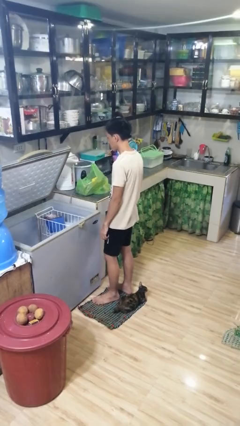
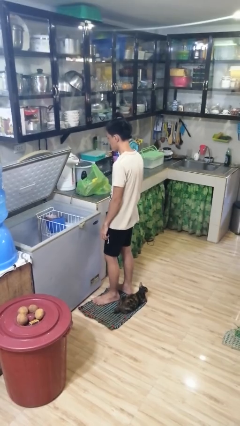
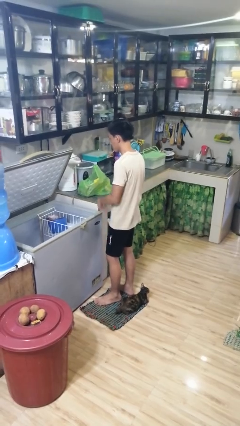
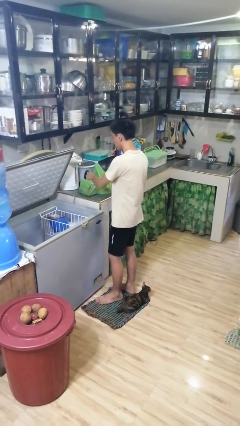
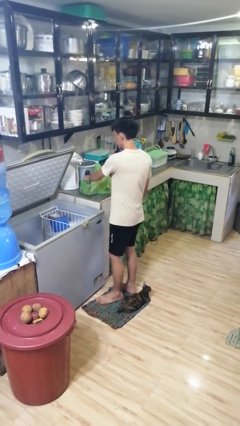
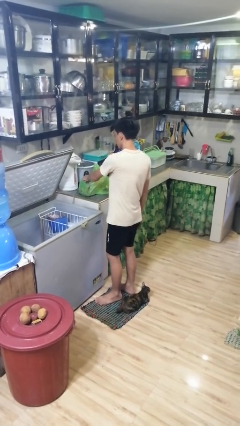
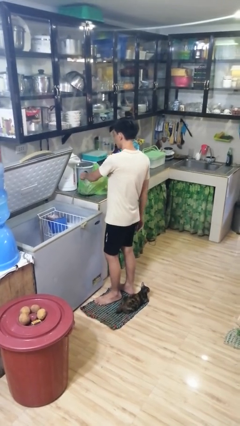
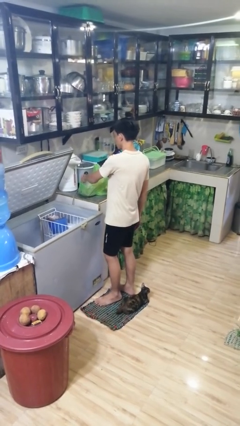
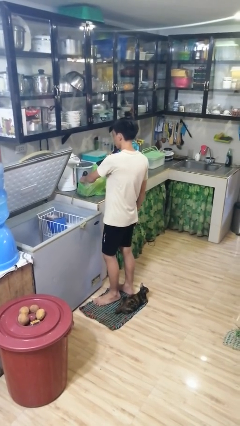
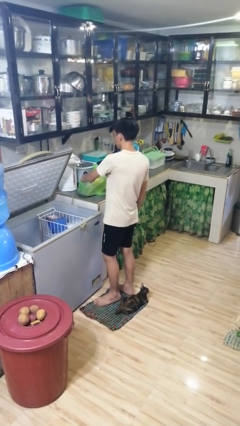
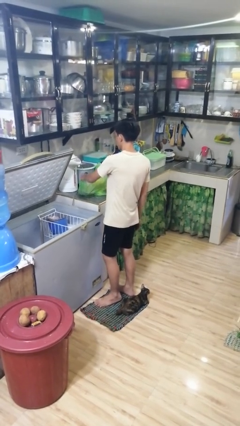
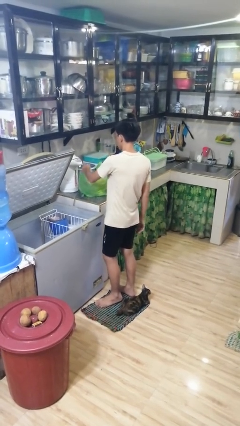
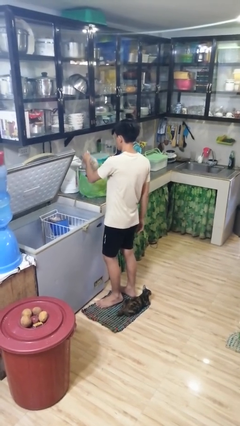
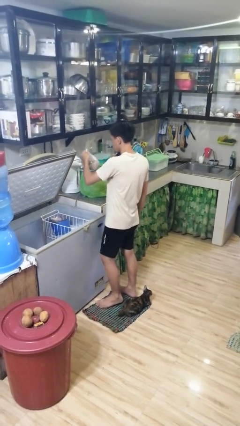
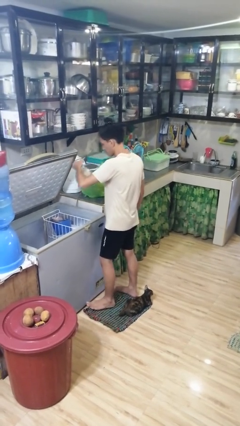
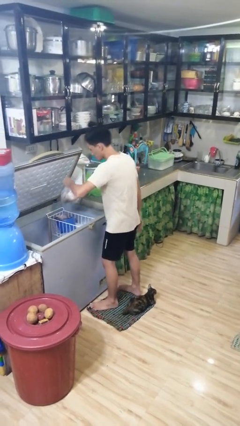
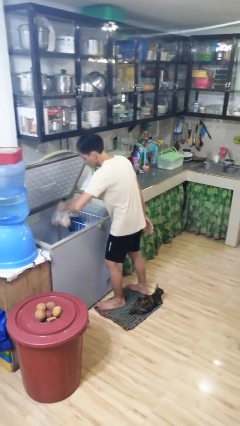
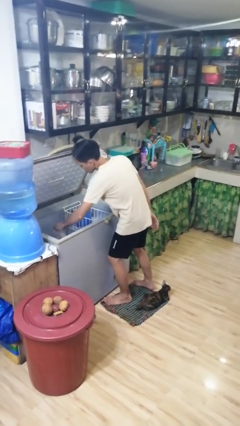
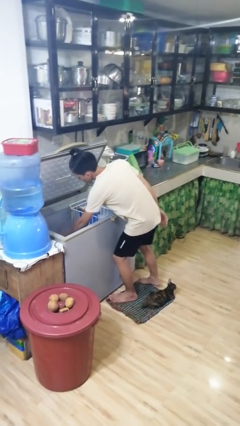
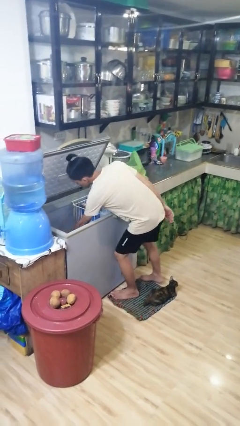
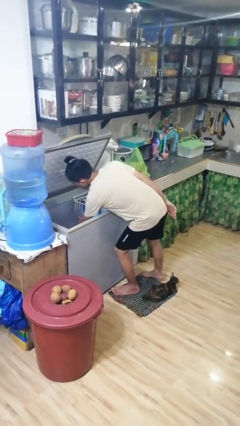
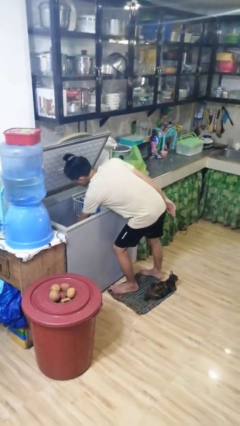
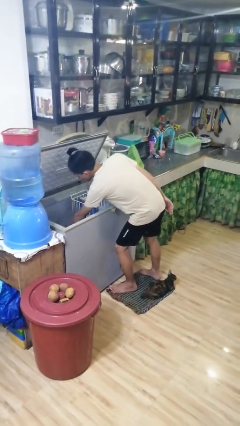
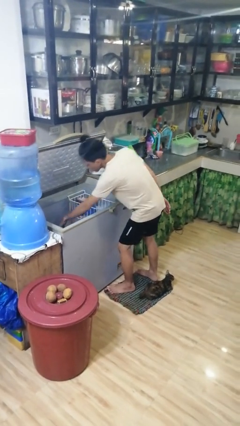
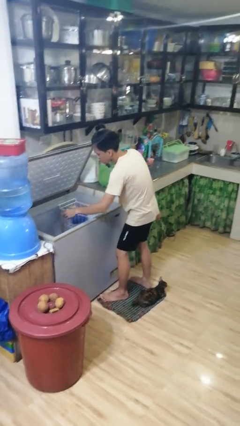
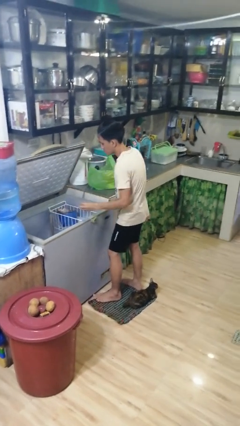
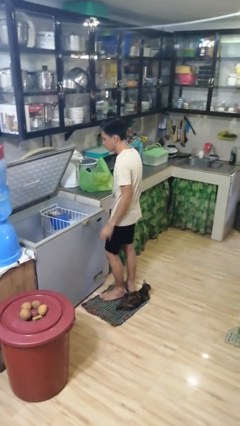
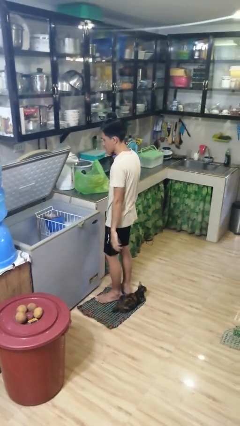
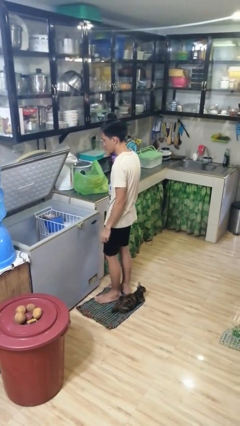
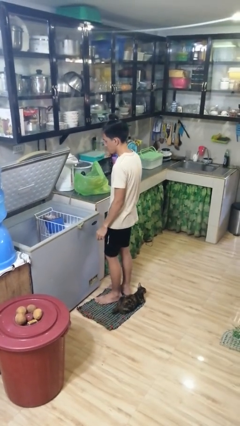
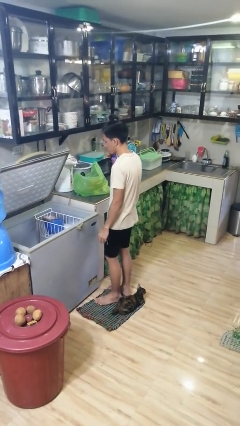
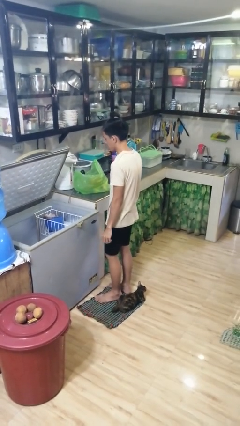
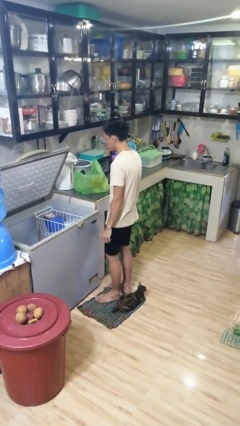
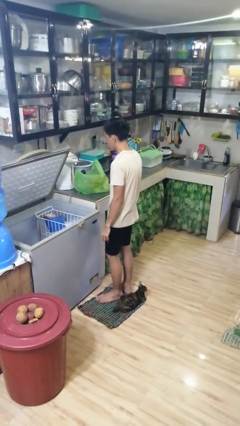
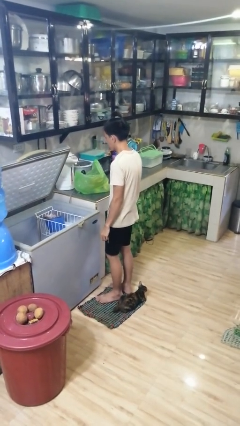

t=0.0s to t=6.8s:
person loads groceries into refrigerator

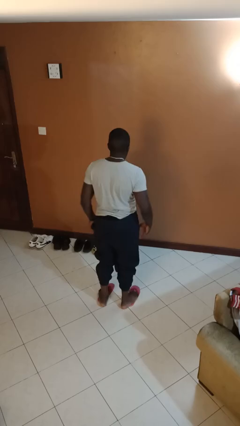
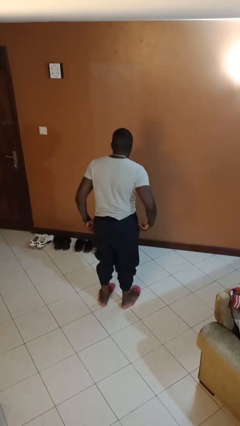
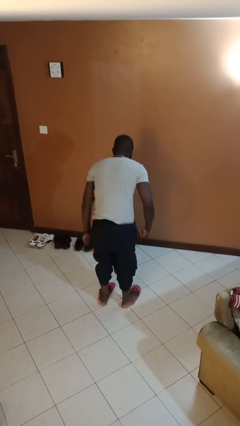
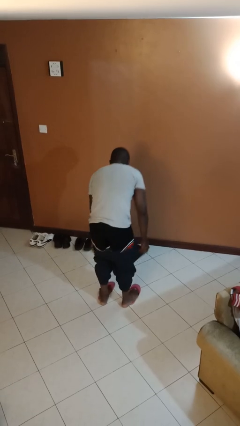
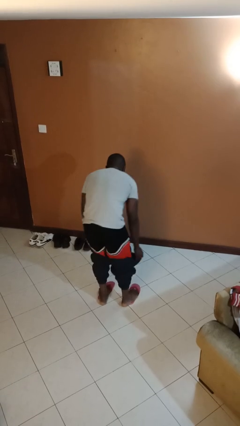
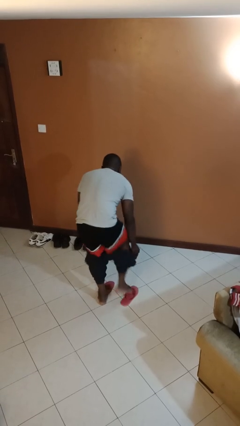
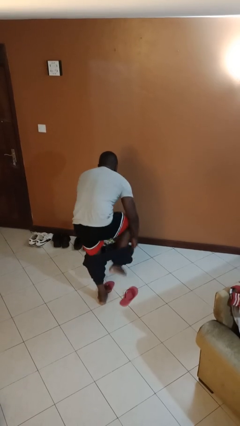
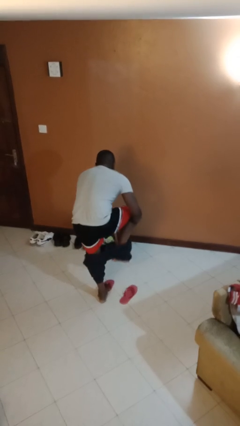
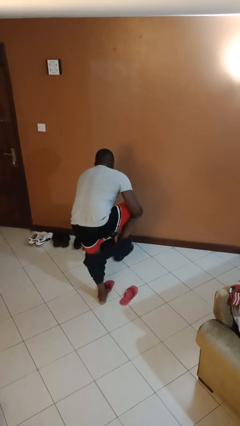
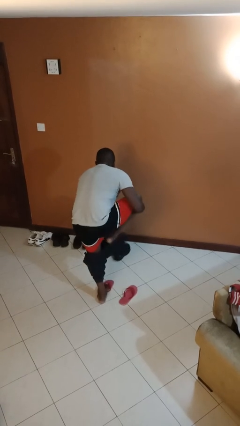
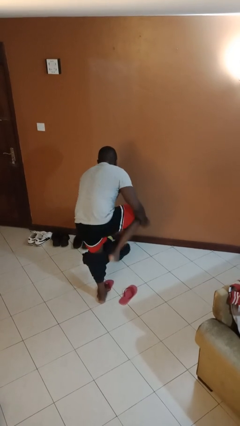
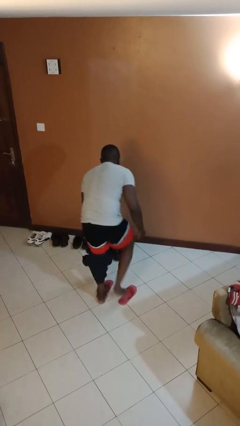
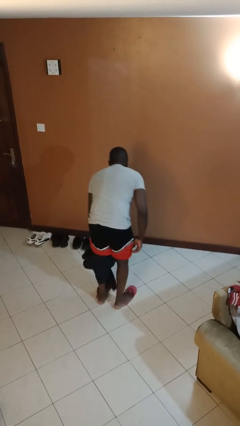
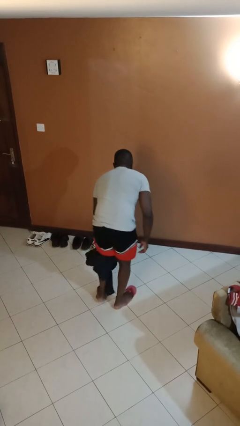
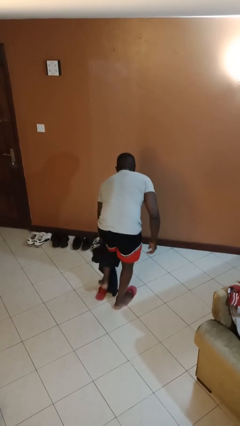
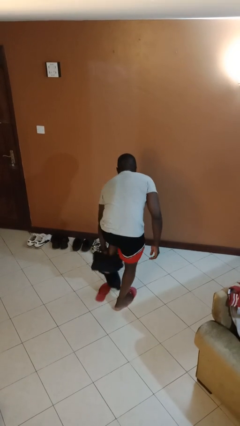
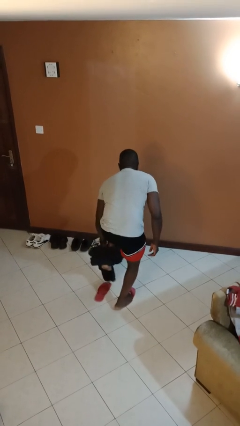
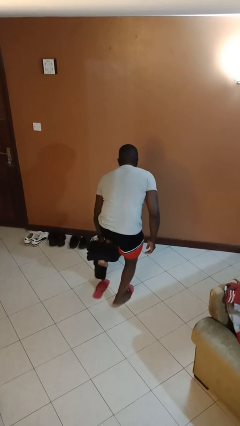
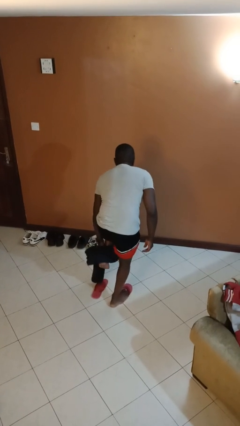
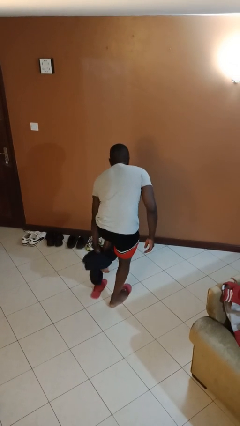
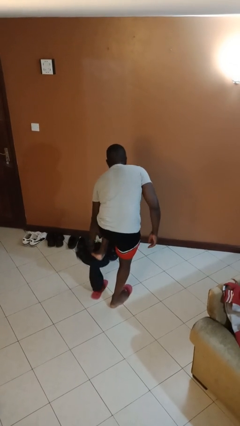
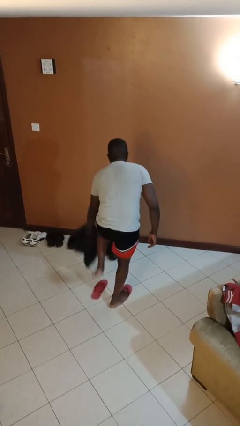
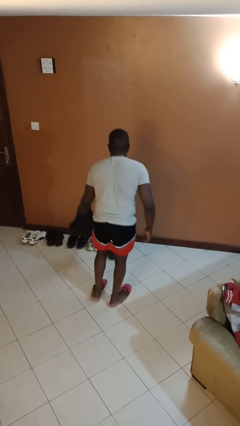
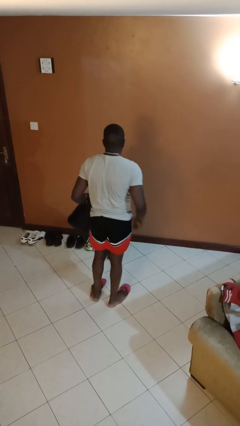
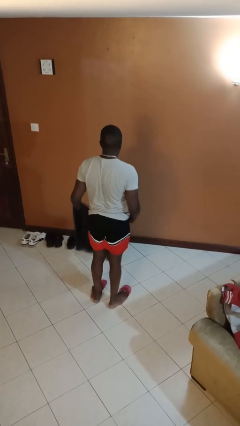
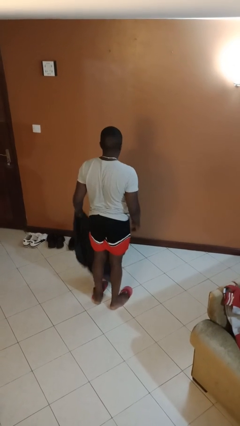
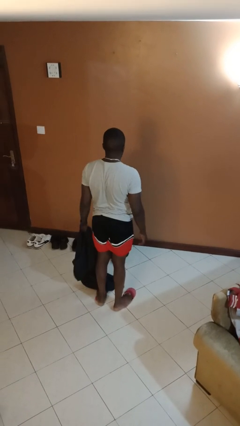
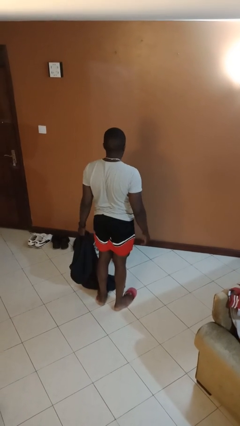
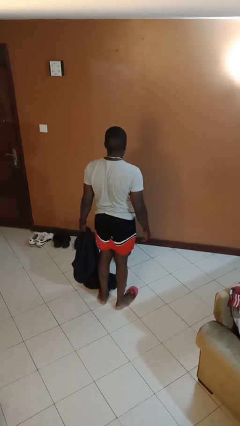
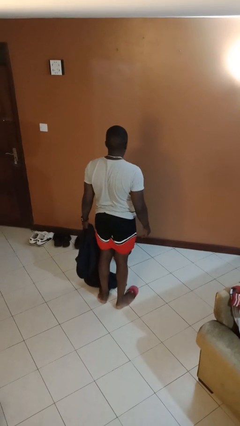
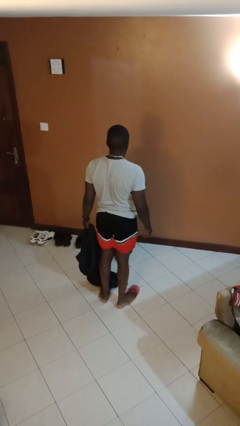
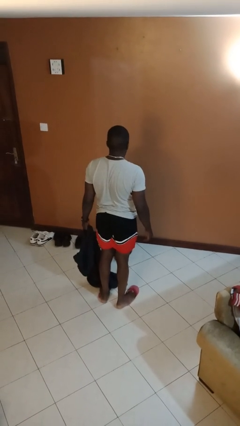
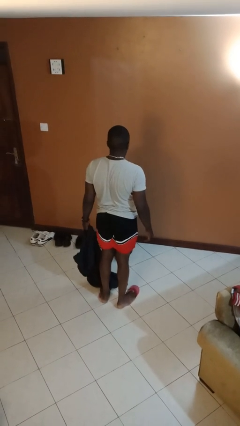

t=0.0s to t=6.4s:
person takes off pants

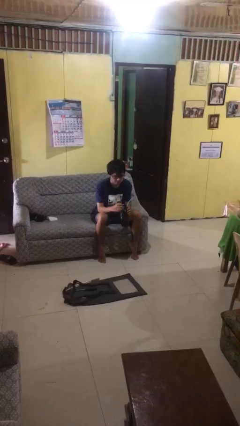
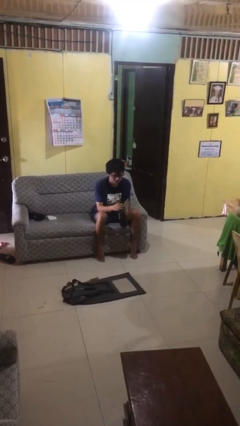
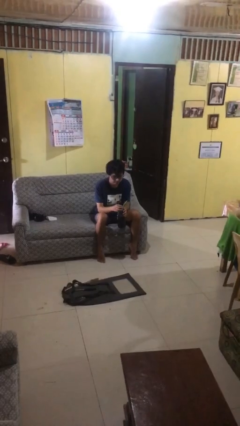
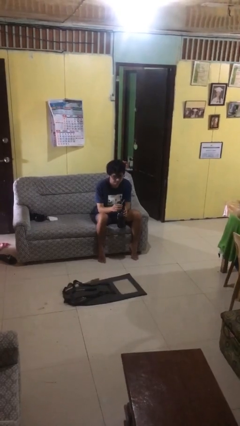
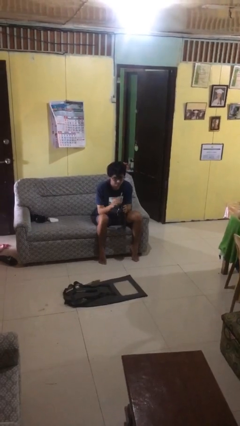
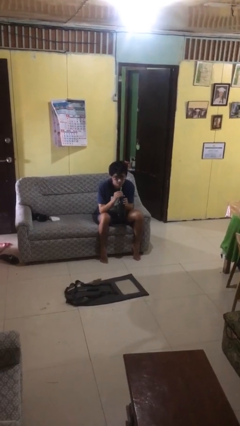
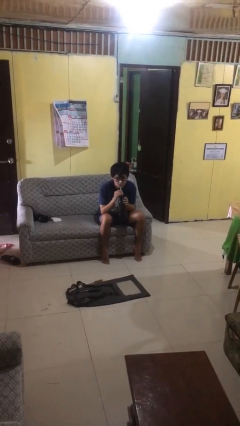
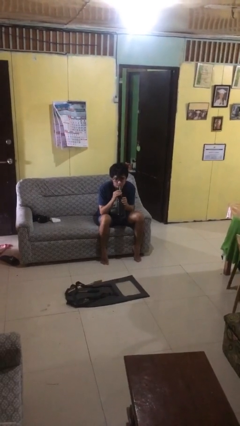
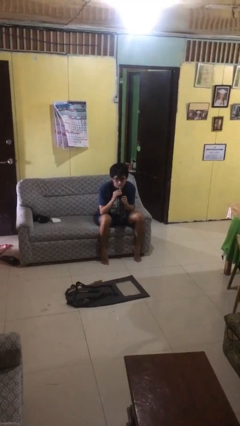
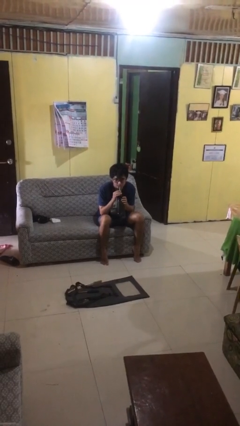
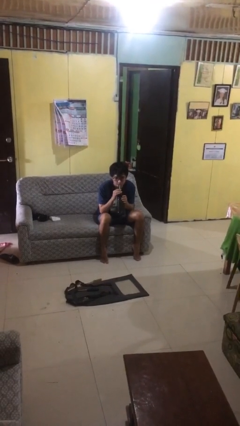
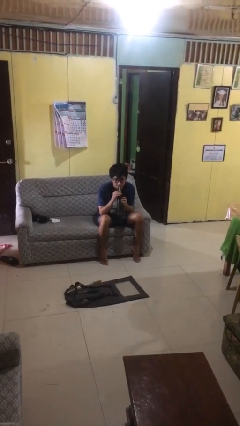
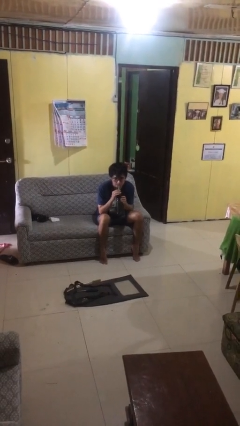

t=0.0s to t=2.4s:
person drinks from straw

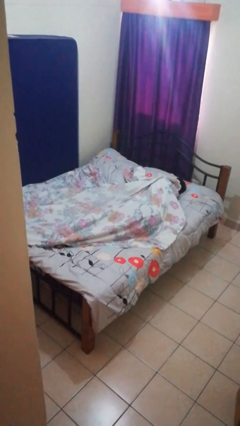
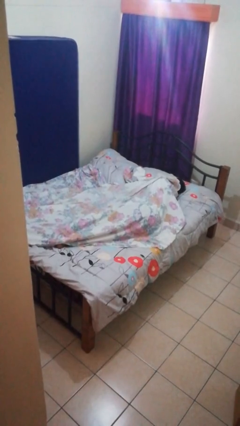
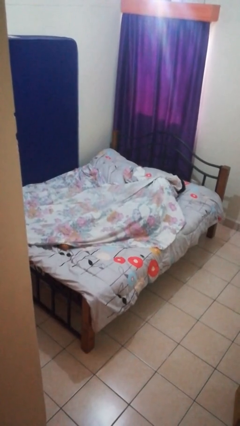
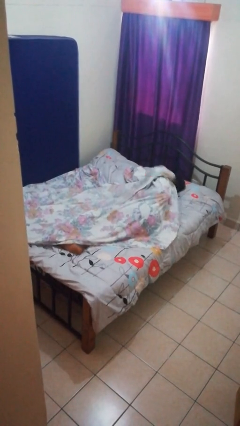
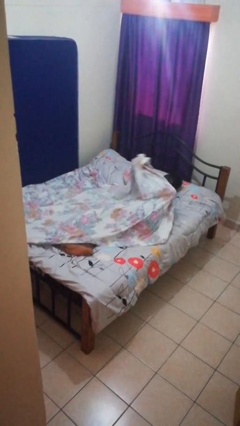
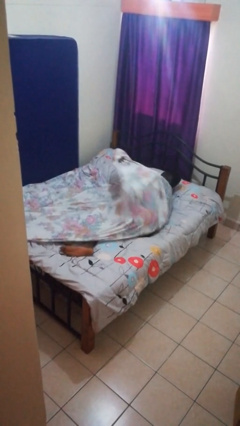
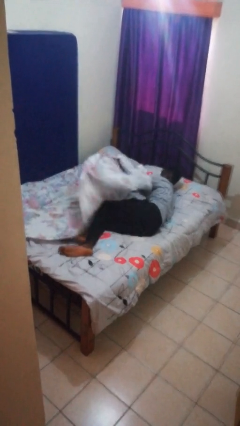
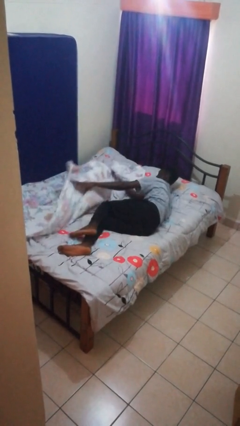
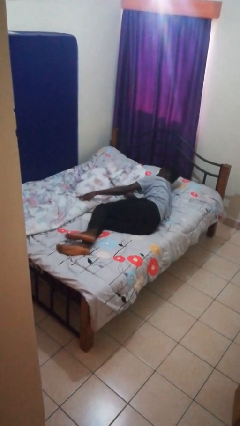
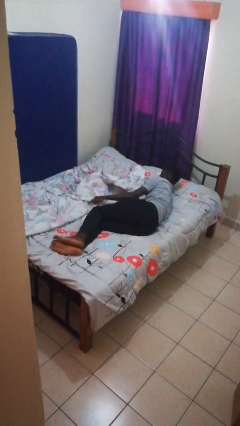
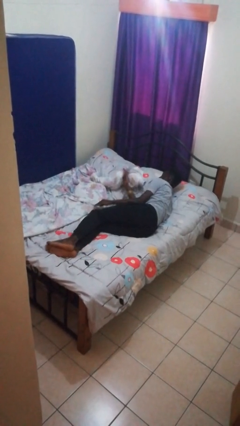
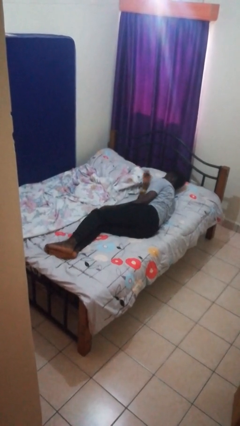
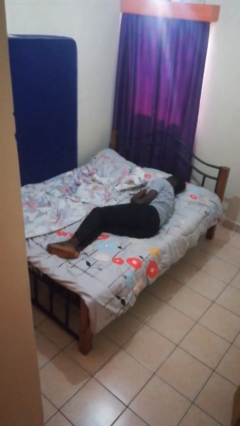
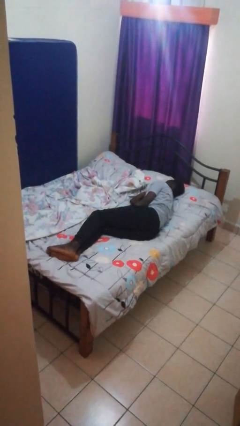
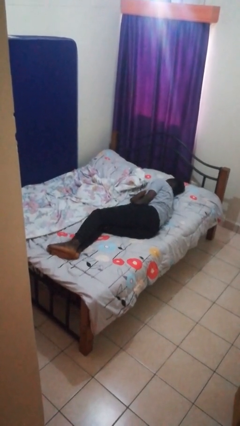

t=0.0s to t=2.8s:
person uncovers with bedsheets
